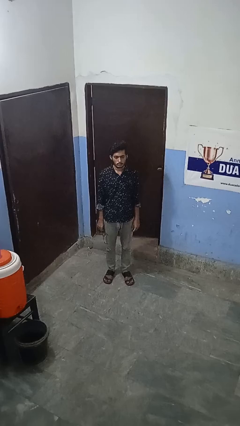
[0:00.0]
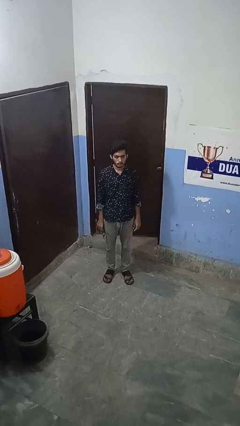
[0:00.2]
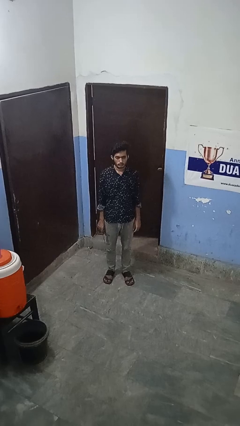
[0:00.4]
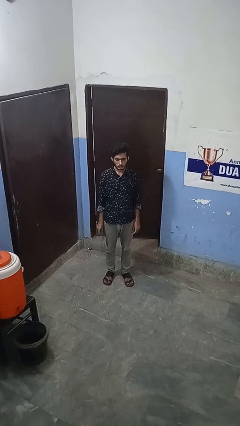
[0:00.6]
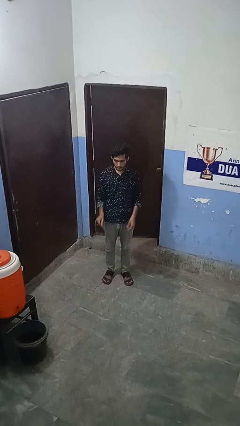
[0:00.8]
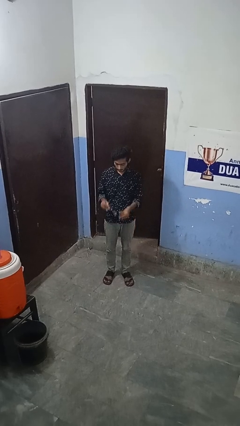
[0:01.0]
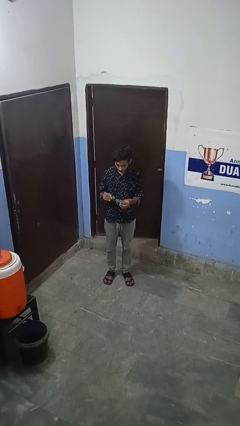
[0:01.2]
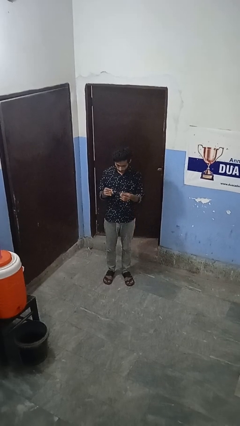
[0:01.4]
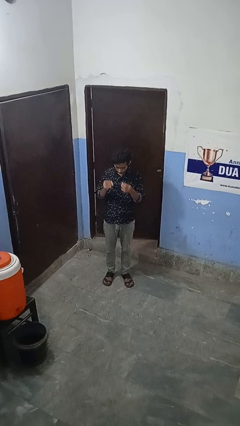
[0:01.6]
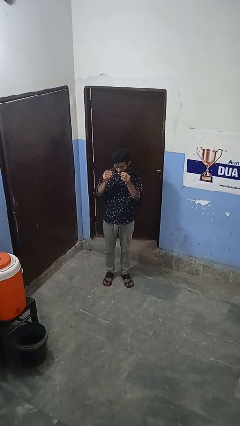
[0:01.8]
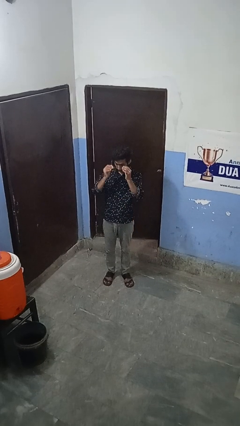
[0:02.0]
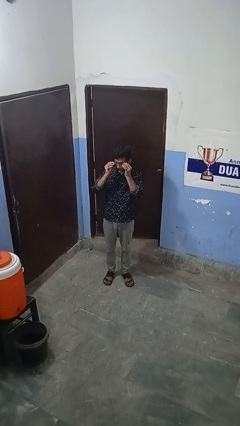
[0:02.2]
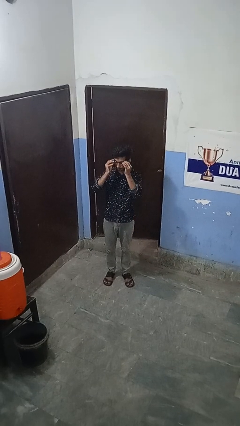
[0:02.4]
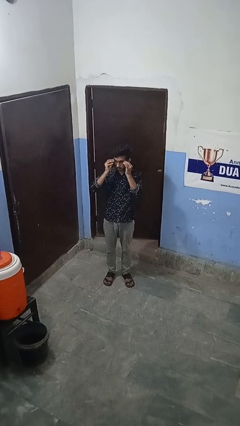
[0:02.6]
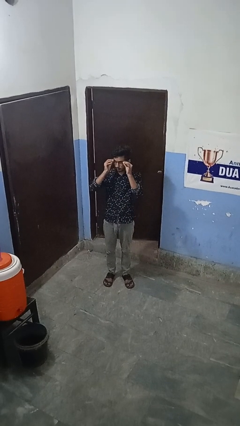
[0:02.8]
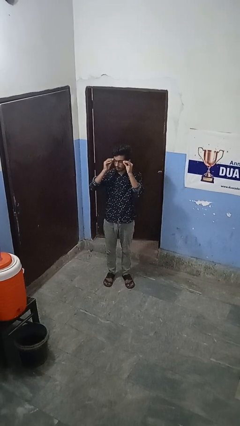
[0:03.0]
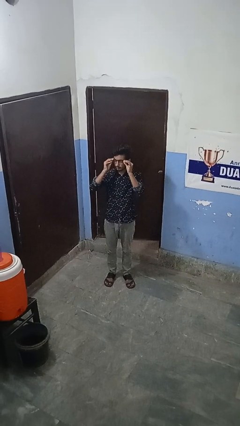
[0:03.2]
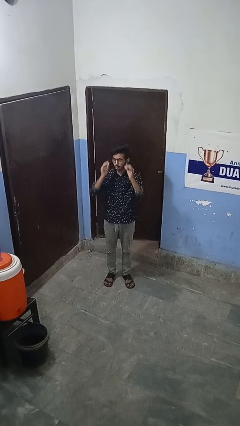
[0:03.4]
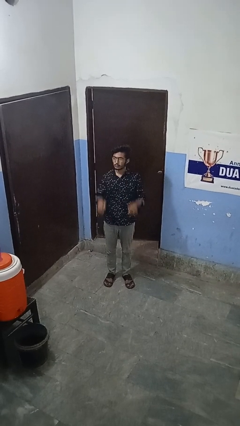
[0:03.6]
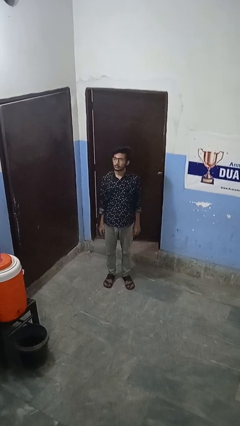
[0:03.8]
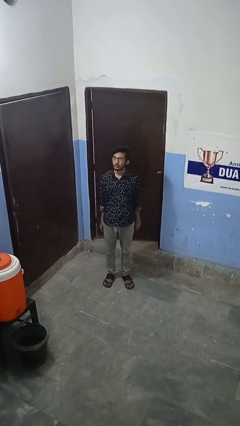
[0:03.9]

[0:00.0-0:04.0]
person puts on glasses

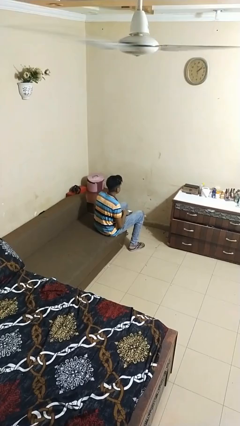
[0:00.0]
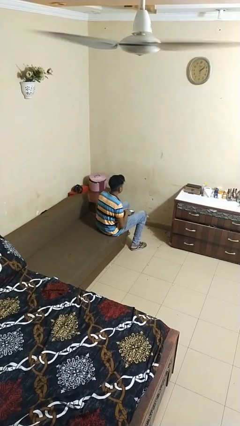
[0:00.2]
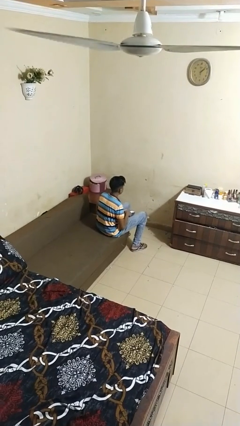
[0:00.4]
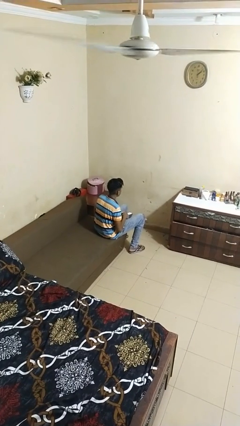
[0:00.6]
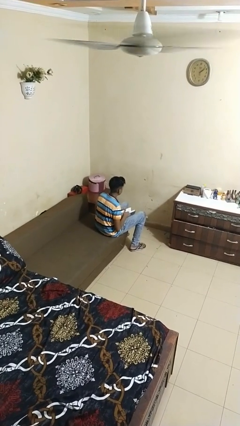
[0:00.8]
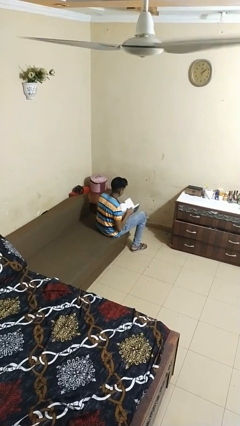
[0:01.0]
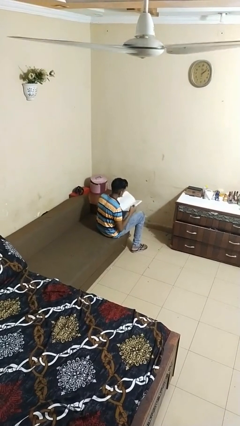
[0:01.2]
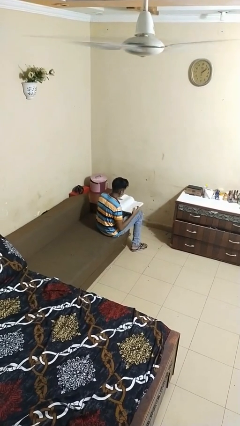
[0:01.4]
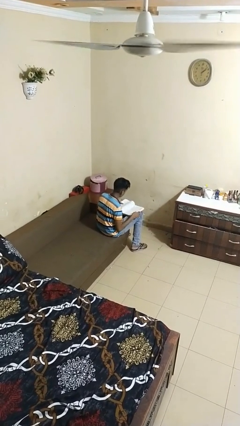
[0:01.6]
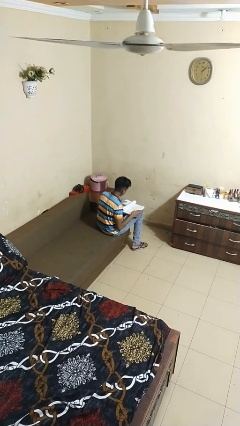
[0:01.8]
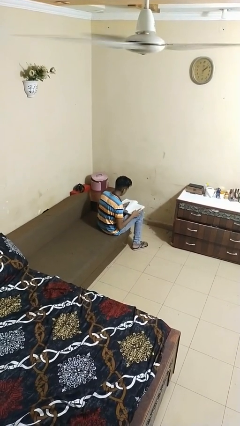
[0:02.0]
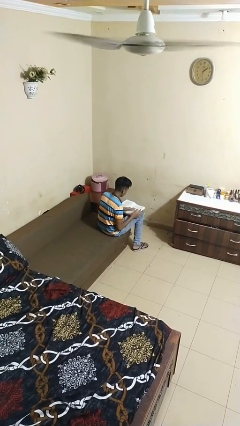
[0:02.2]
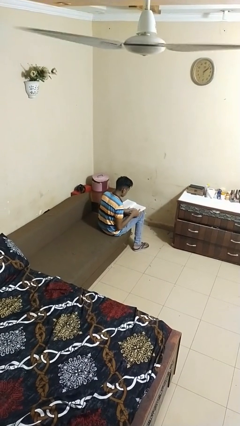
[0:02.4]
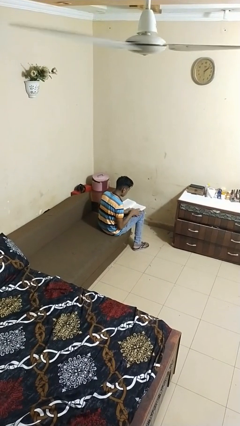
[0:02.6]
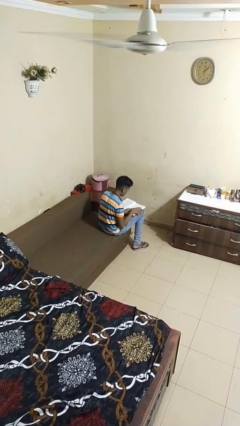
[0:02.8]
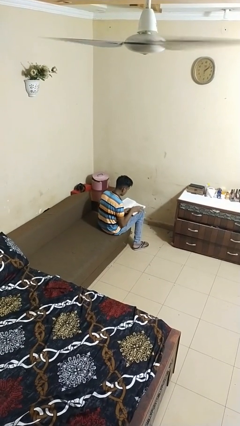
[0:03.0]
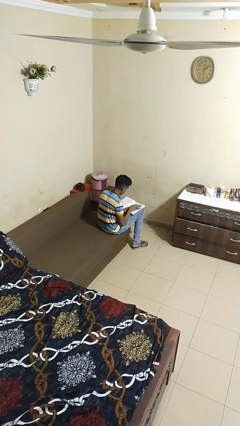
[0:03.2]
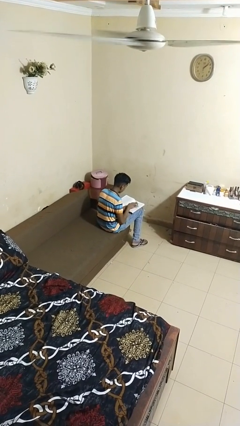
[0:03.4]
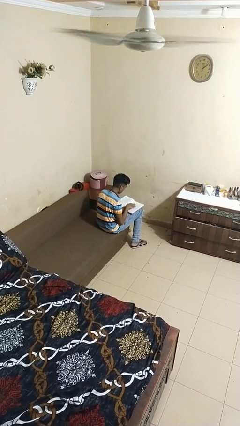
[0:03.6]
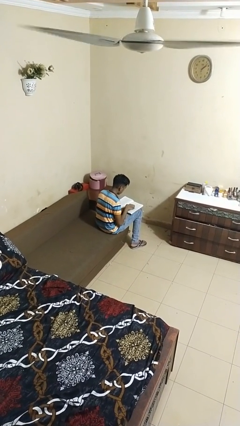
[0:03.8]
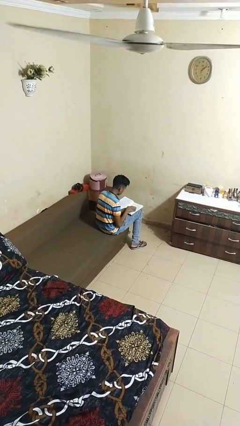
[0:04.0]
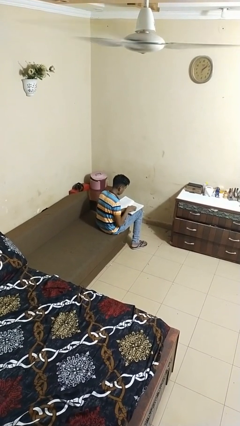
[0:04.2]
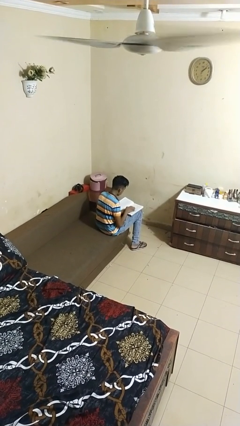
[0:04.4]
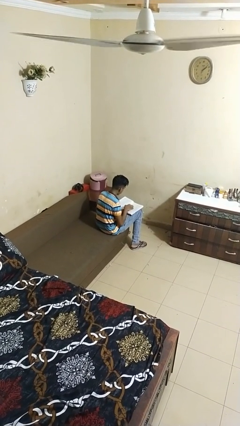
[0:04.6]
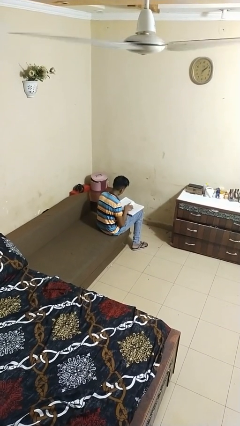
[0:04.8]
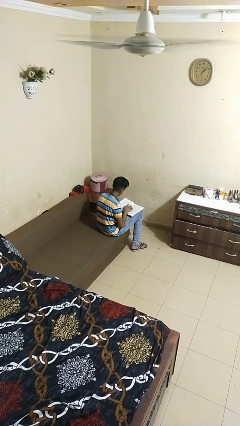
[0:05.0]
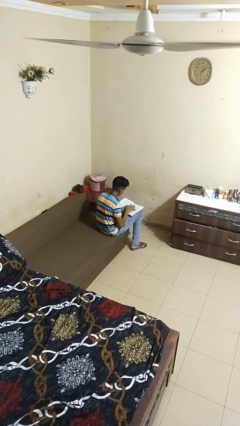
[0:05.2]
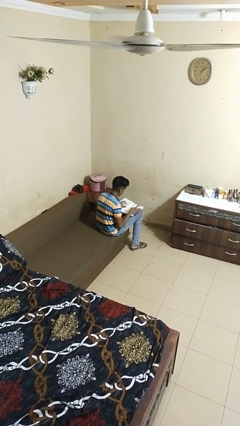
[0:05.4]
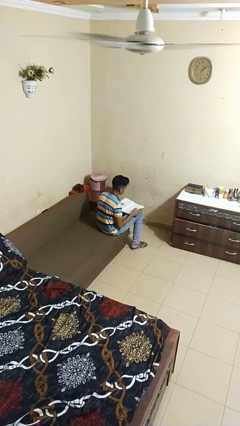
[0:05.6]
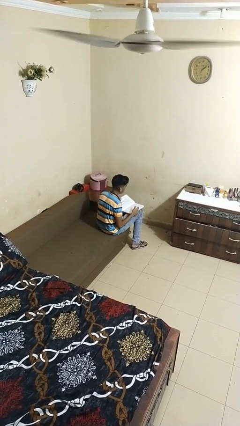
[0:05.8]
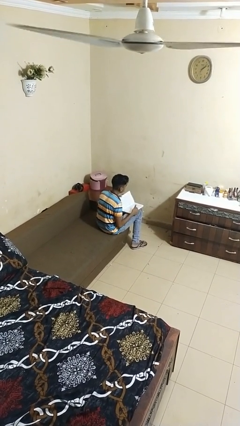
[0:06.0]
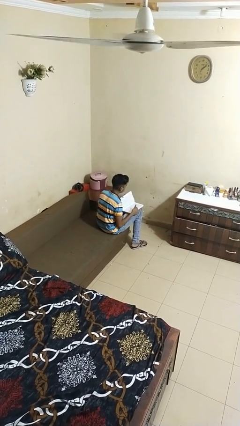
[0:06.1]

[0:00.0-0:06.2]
person reads book

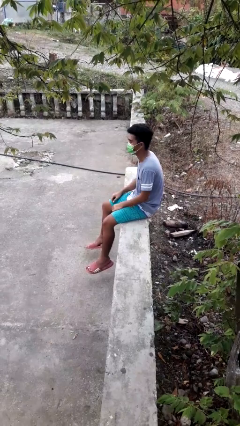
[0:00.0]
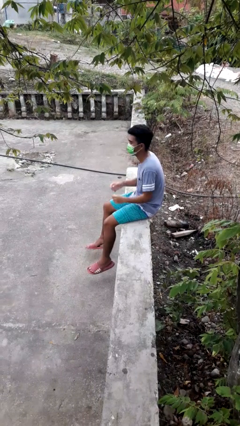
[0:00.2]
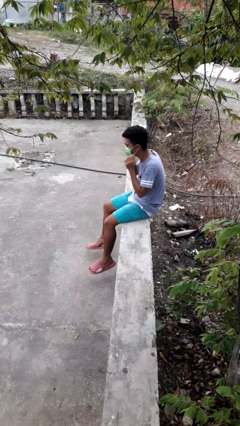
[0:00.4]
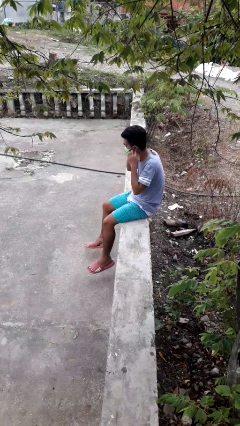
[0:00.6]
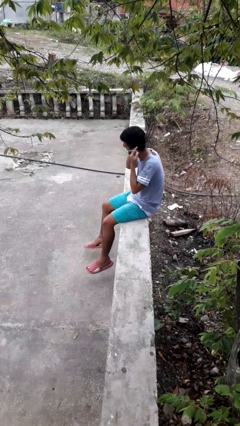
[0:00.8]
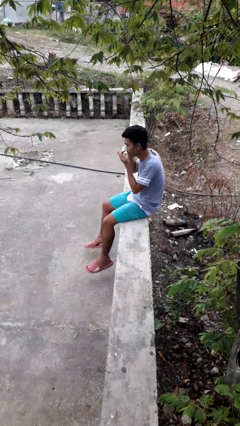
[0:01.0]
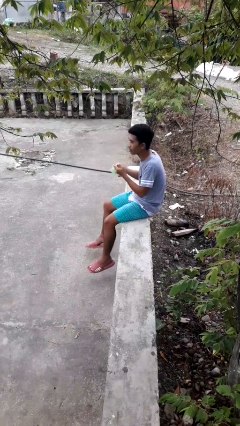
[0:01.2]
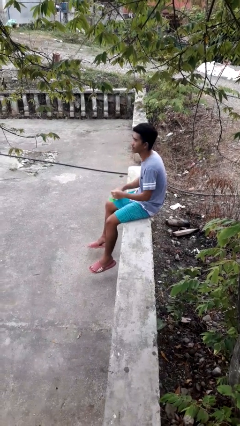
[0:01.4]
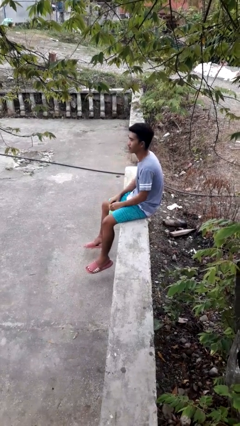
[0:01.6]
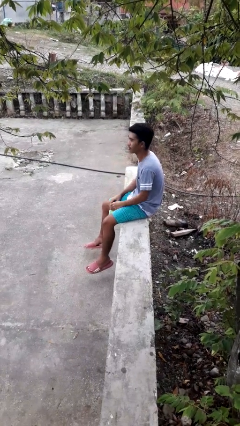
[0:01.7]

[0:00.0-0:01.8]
person takes off facemask

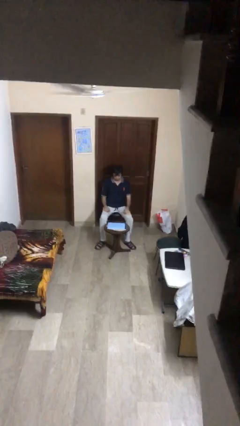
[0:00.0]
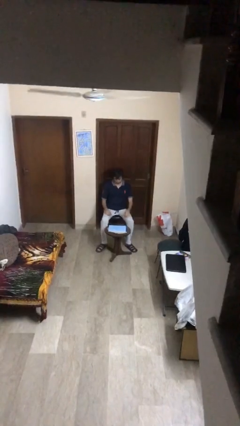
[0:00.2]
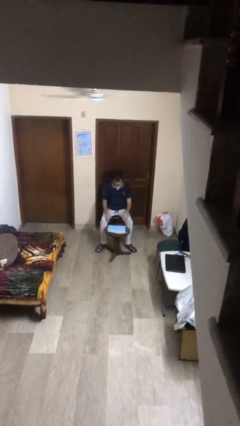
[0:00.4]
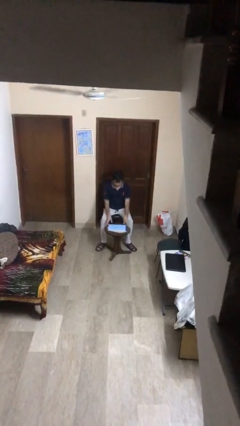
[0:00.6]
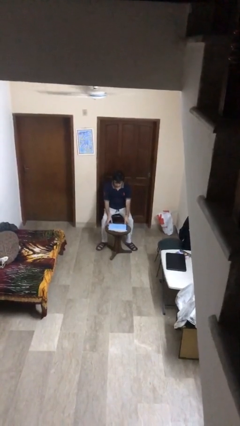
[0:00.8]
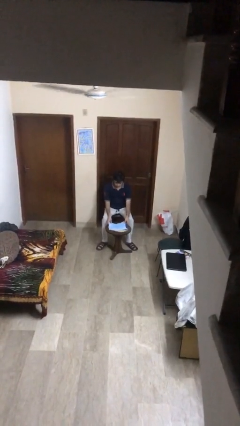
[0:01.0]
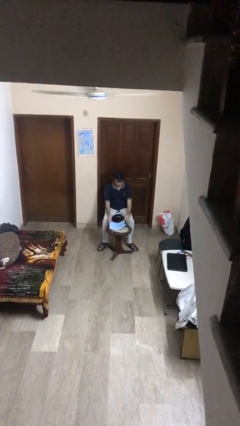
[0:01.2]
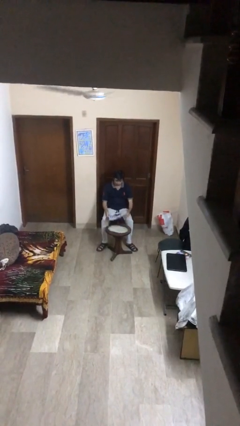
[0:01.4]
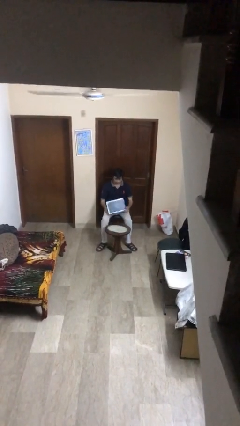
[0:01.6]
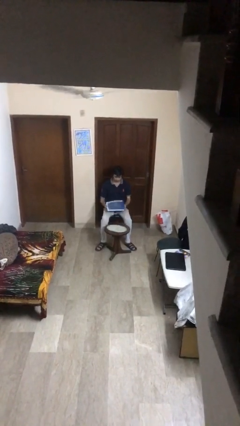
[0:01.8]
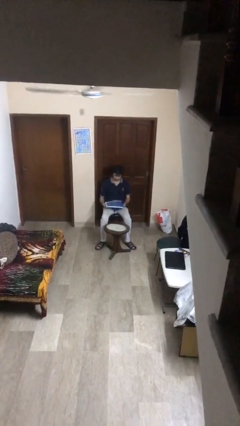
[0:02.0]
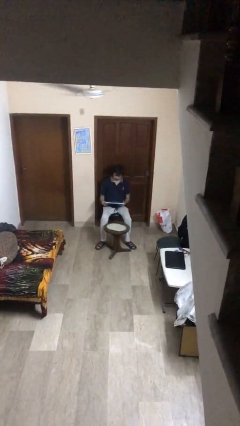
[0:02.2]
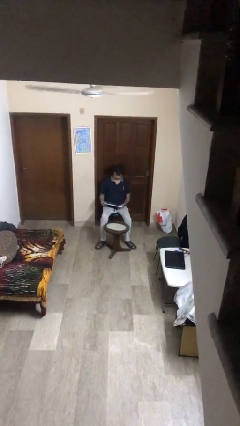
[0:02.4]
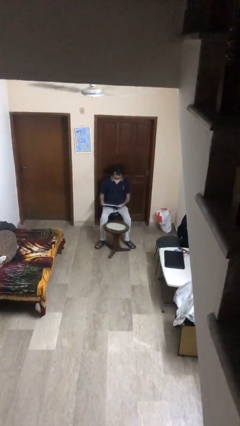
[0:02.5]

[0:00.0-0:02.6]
person picks up object from table

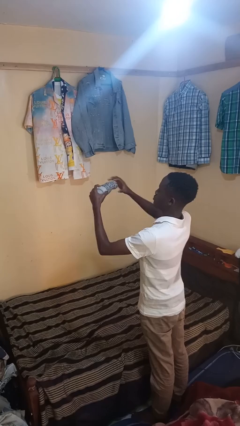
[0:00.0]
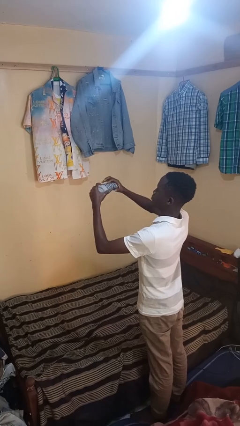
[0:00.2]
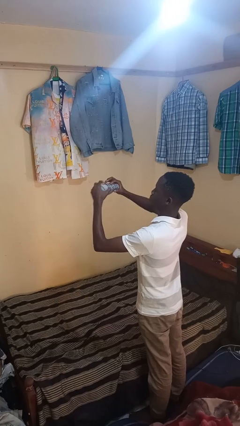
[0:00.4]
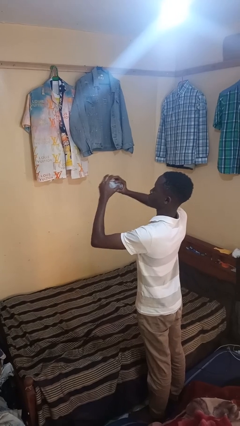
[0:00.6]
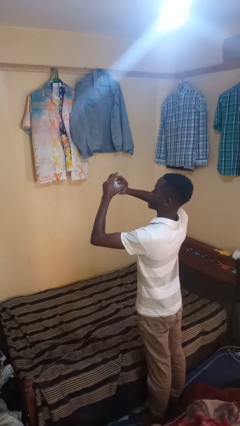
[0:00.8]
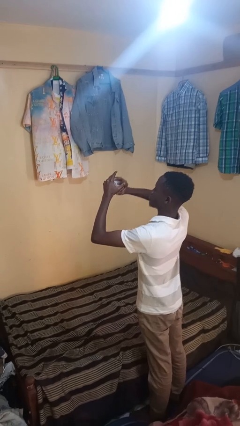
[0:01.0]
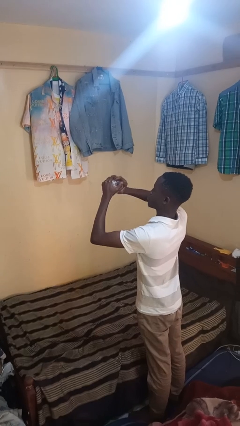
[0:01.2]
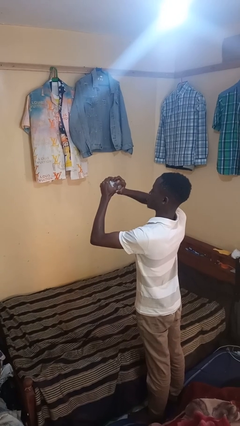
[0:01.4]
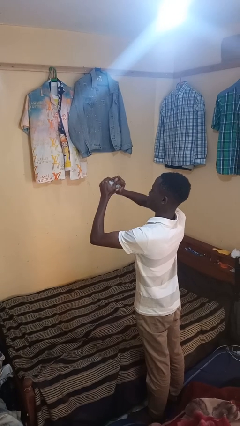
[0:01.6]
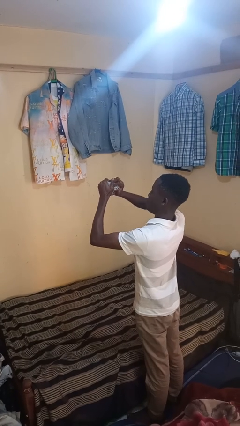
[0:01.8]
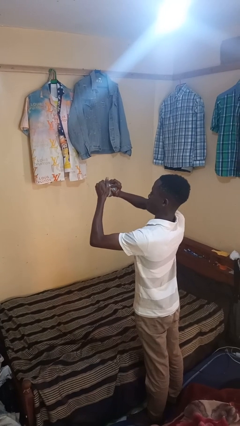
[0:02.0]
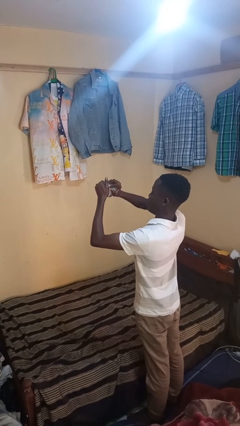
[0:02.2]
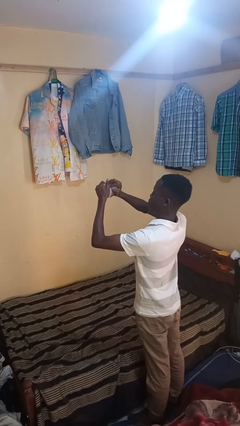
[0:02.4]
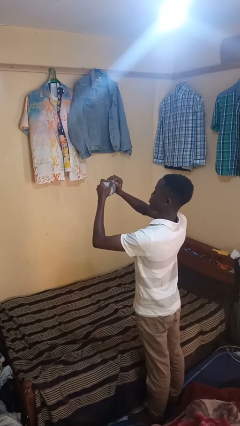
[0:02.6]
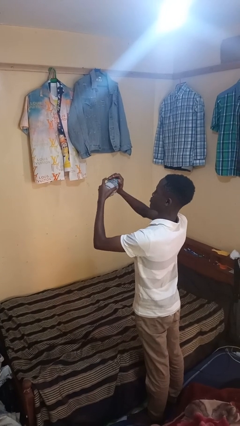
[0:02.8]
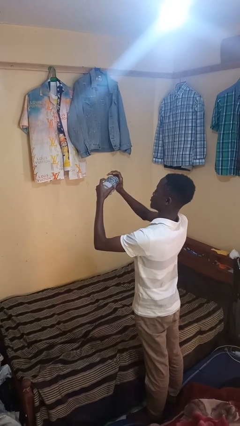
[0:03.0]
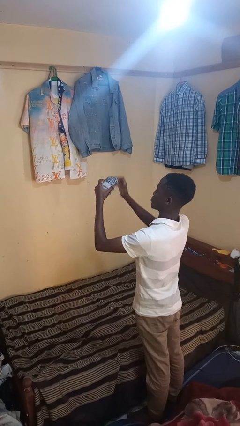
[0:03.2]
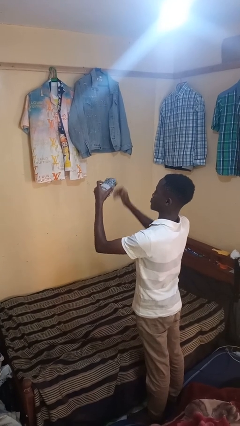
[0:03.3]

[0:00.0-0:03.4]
person squeezes object
